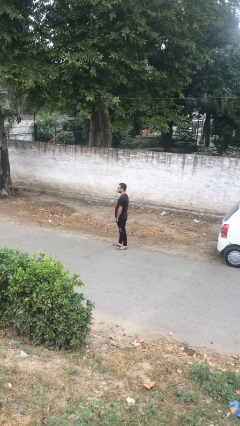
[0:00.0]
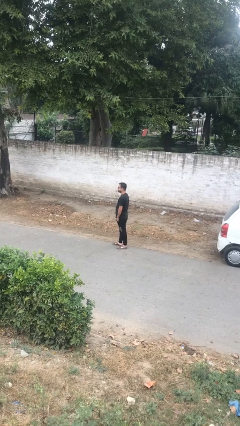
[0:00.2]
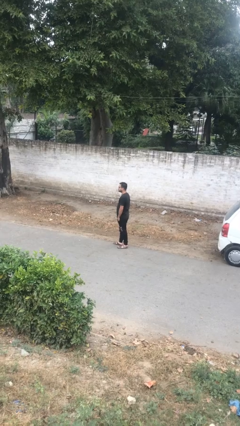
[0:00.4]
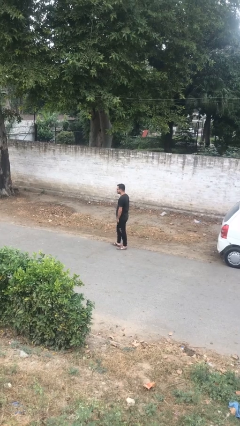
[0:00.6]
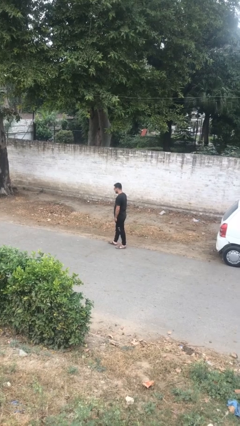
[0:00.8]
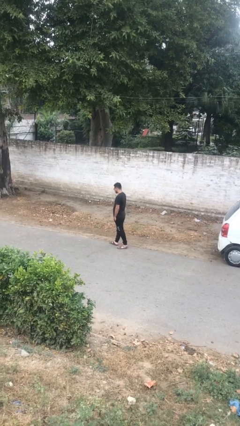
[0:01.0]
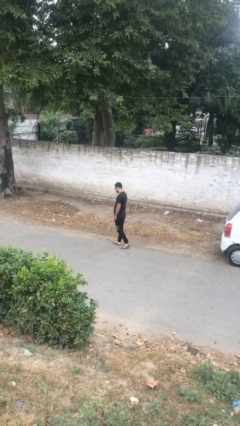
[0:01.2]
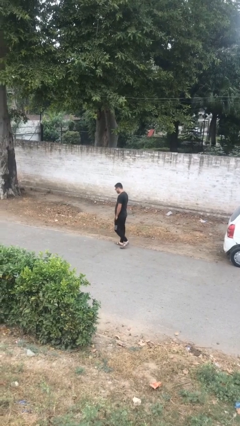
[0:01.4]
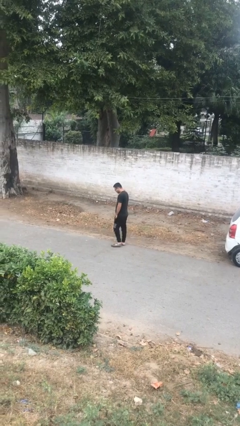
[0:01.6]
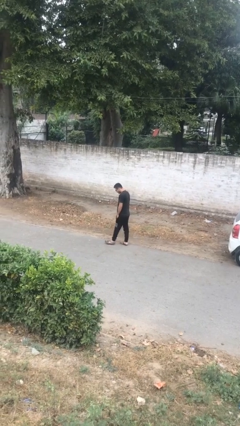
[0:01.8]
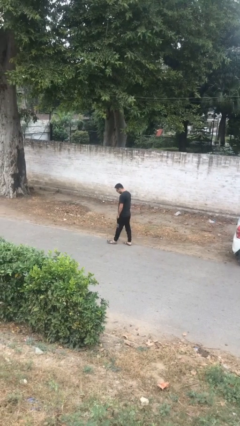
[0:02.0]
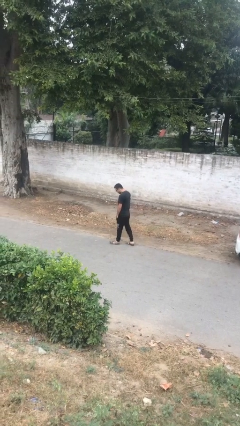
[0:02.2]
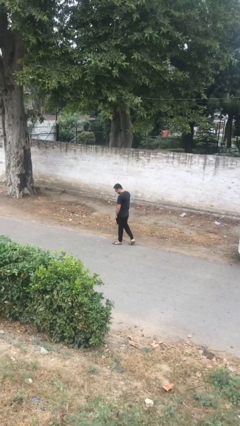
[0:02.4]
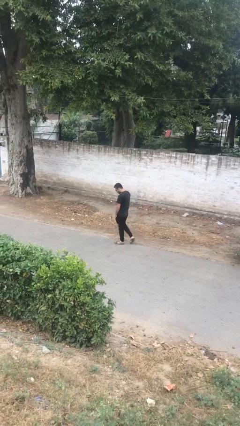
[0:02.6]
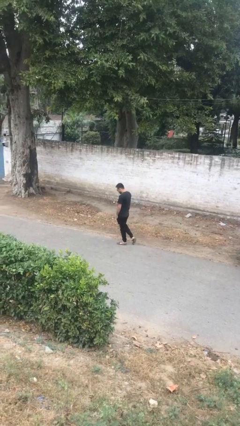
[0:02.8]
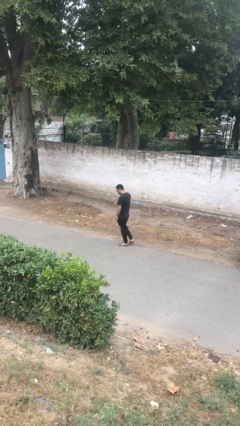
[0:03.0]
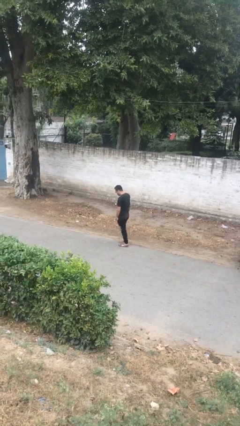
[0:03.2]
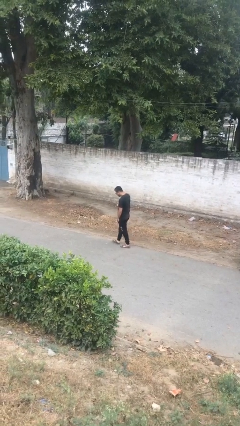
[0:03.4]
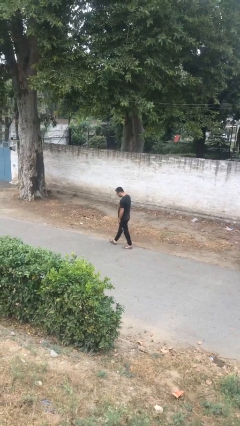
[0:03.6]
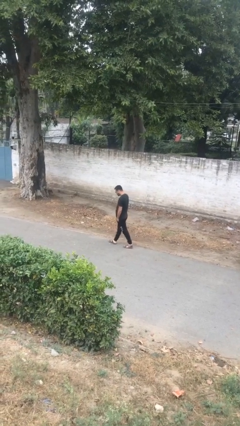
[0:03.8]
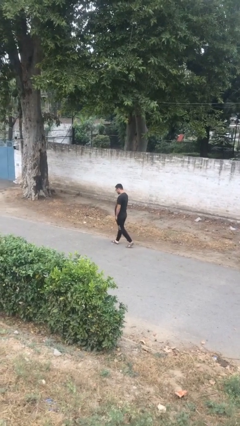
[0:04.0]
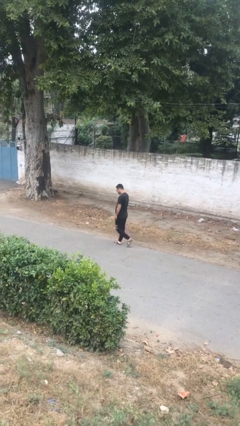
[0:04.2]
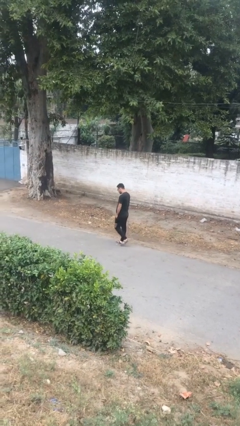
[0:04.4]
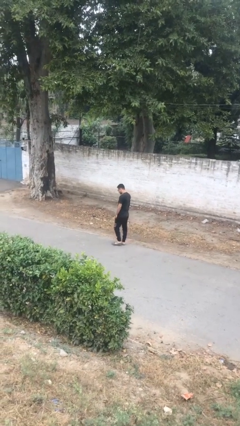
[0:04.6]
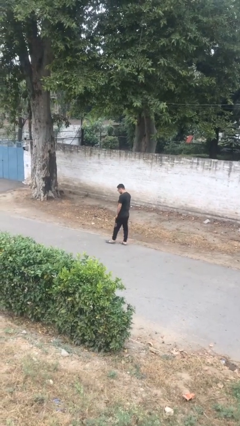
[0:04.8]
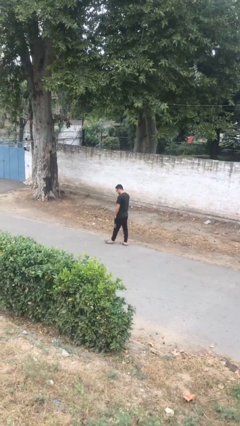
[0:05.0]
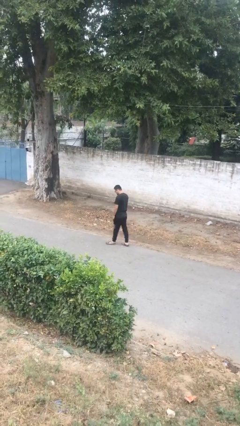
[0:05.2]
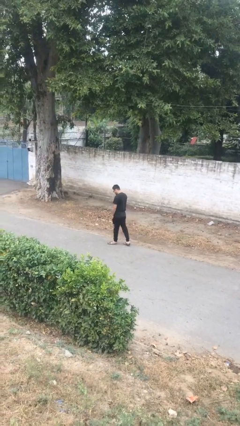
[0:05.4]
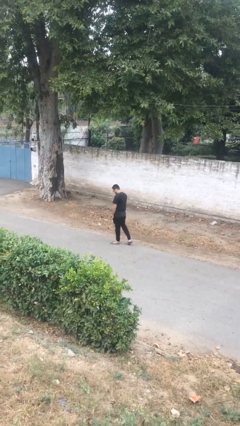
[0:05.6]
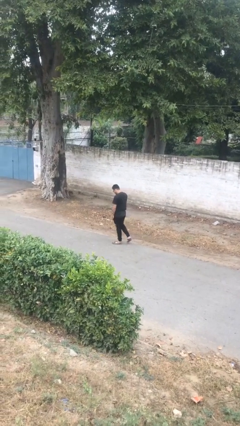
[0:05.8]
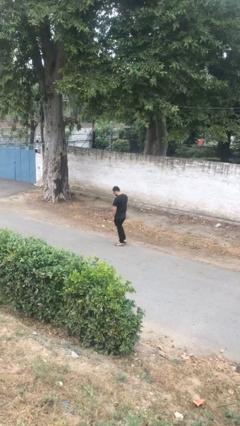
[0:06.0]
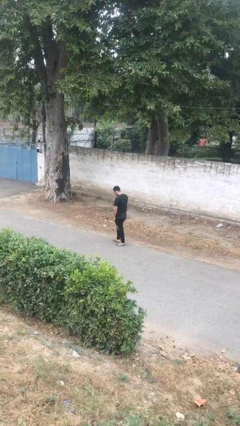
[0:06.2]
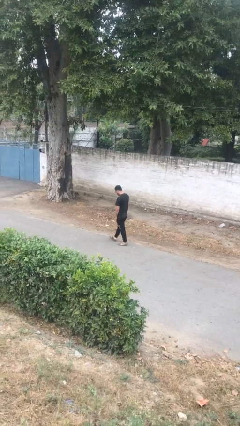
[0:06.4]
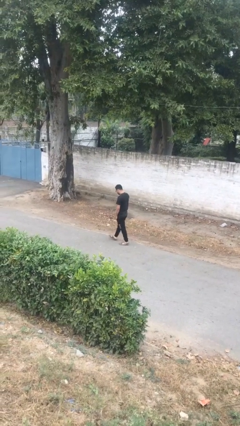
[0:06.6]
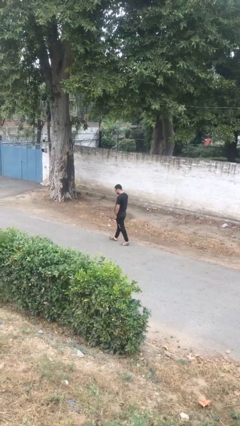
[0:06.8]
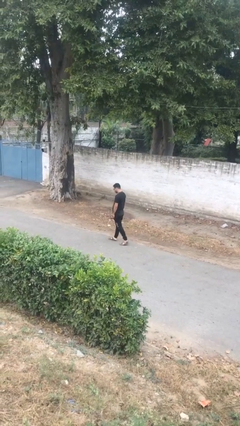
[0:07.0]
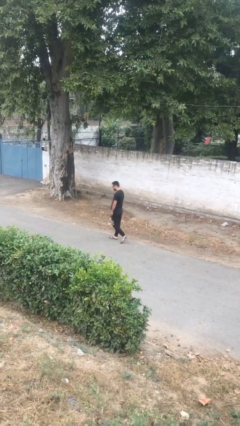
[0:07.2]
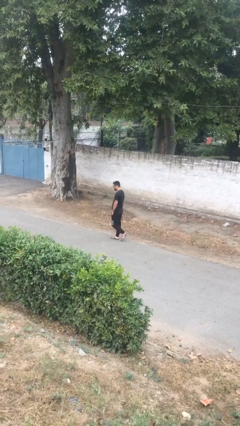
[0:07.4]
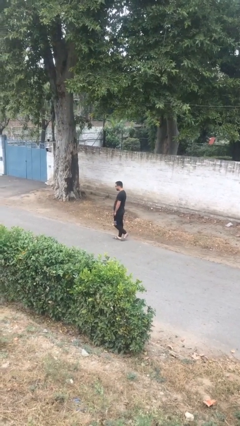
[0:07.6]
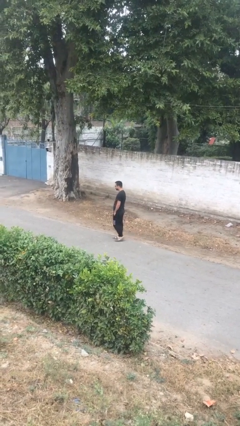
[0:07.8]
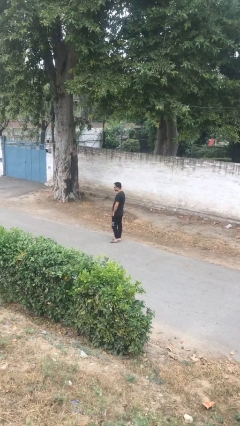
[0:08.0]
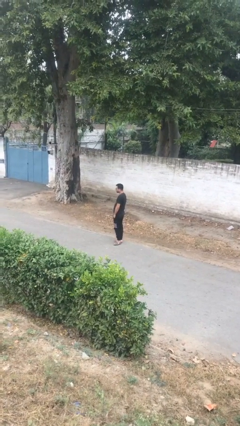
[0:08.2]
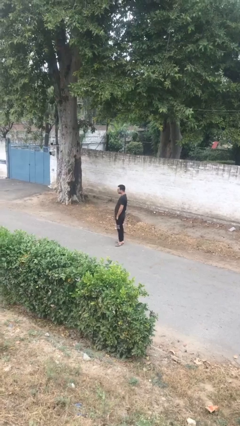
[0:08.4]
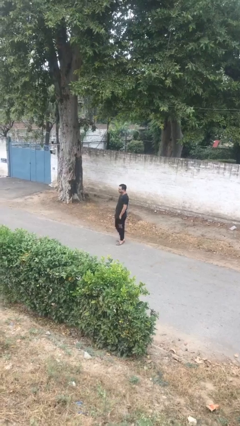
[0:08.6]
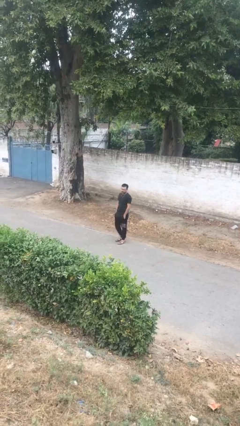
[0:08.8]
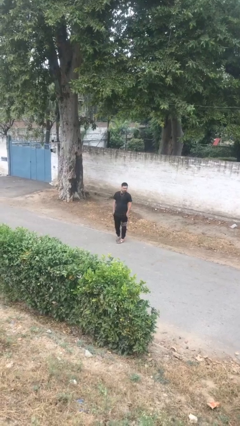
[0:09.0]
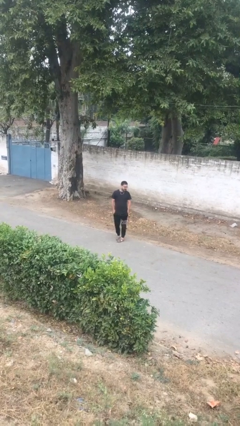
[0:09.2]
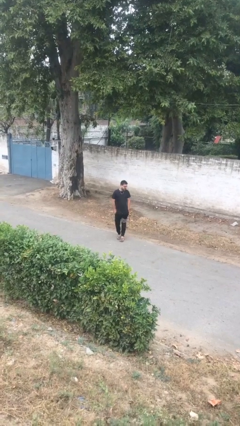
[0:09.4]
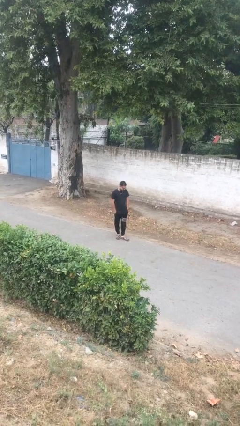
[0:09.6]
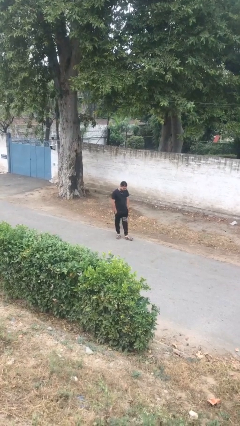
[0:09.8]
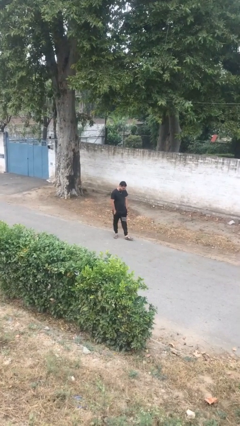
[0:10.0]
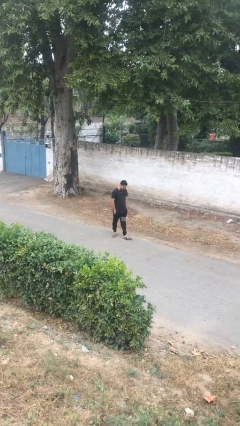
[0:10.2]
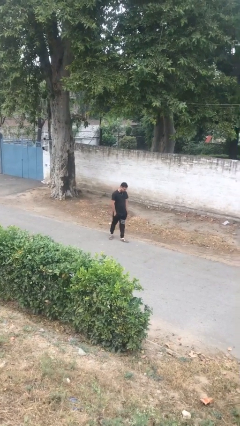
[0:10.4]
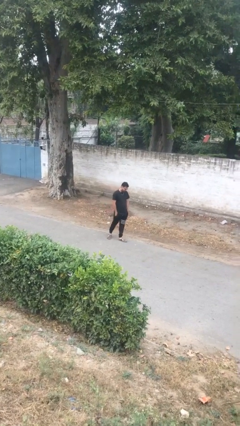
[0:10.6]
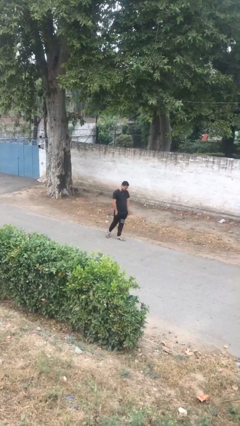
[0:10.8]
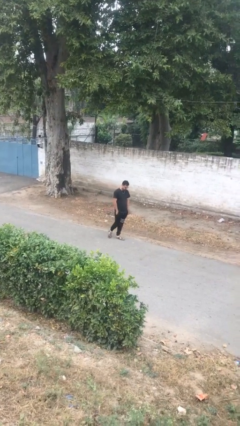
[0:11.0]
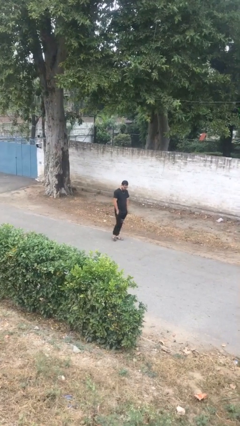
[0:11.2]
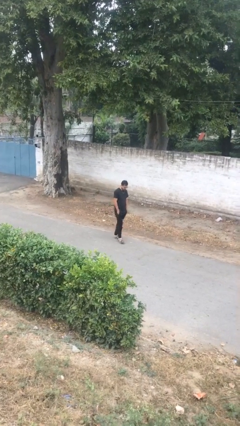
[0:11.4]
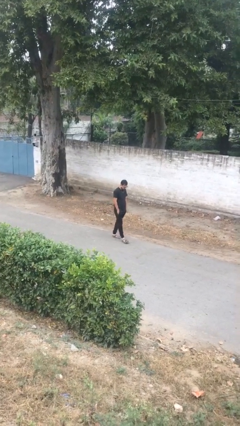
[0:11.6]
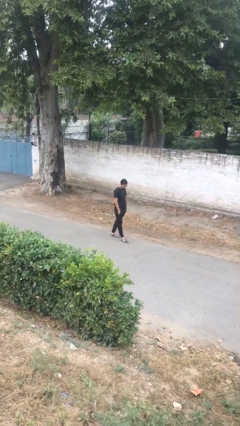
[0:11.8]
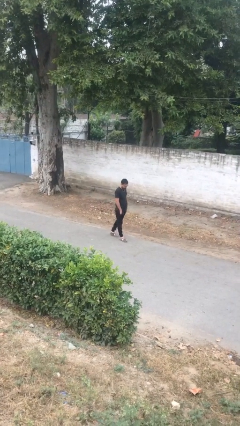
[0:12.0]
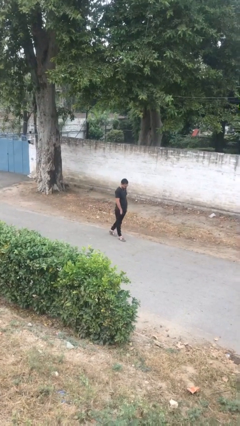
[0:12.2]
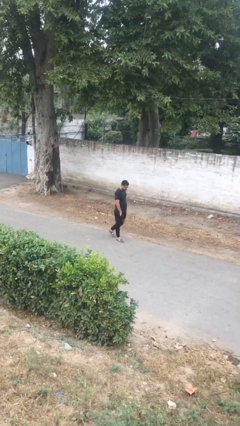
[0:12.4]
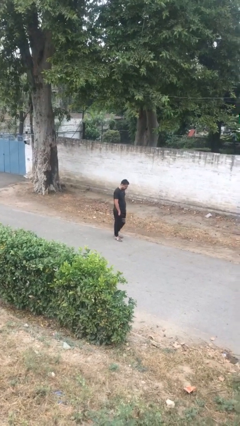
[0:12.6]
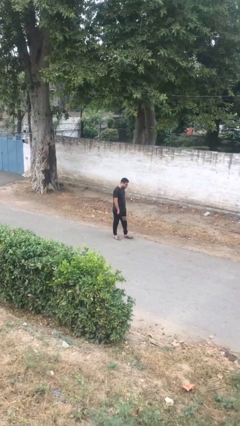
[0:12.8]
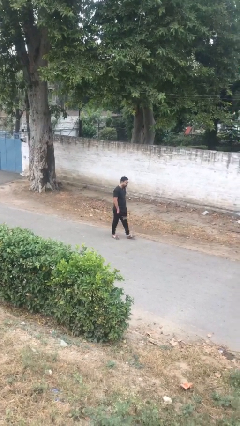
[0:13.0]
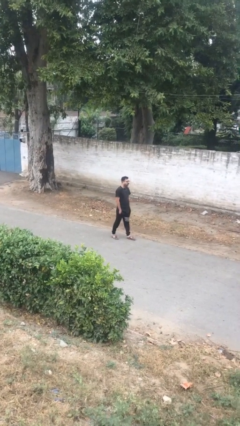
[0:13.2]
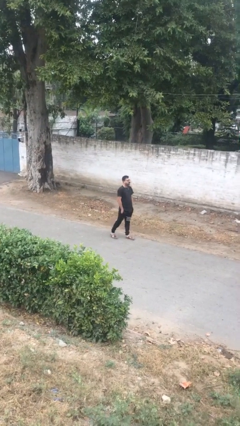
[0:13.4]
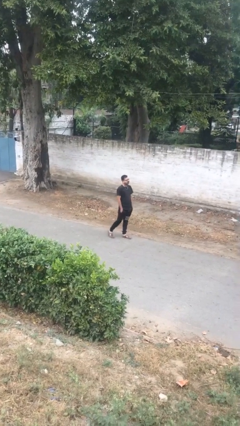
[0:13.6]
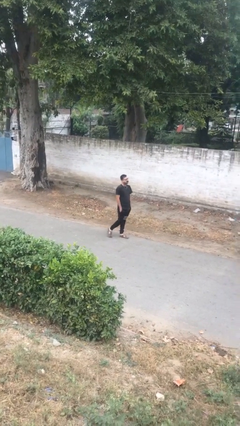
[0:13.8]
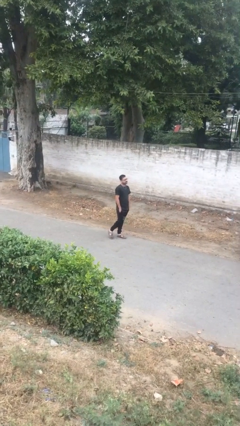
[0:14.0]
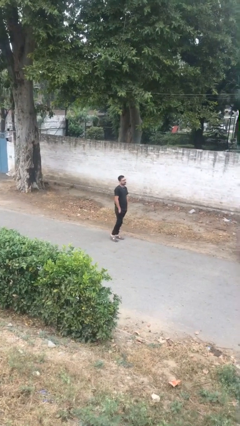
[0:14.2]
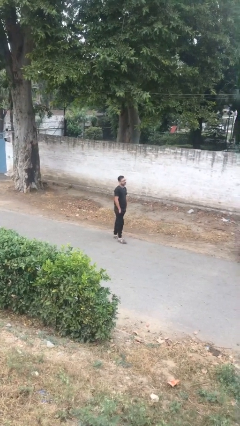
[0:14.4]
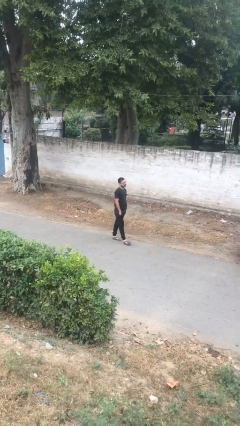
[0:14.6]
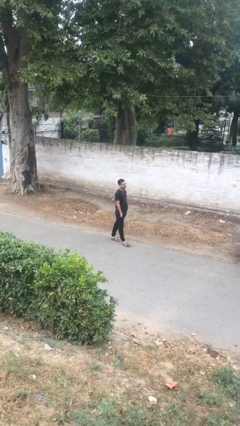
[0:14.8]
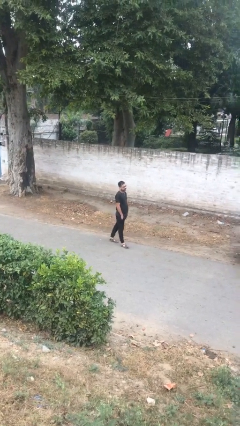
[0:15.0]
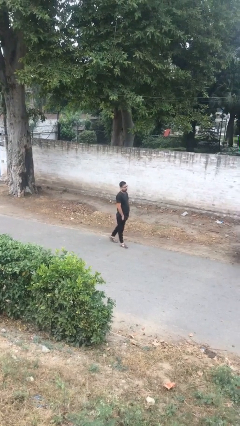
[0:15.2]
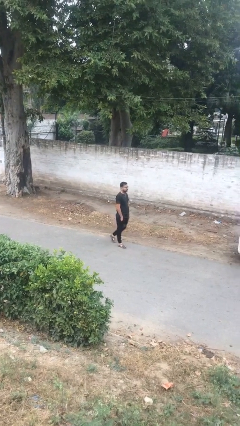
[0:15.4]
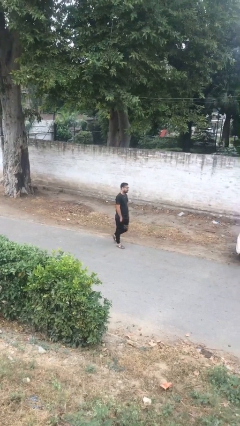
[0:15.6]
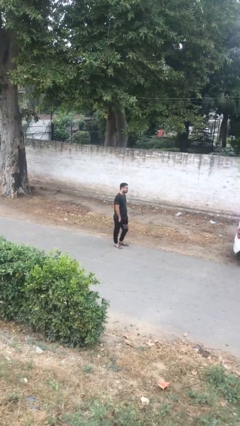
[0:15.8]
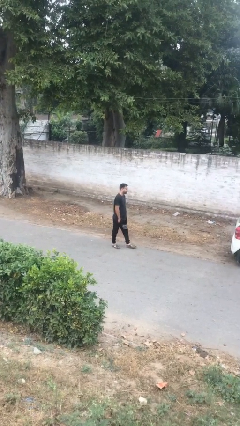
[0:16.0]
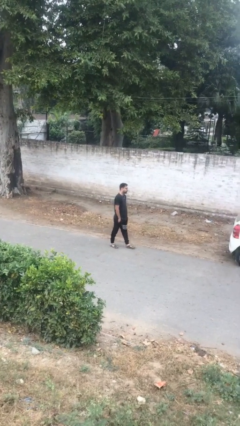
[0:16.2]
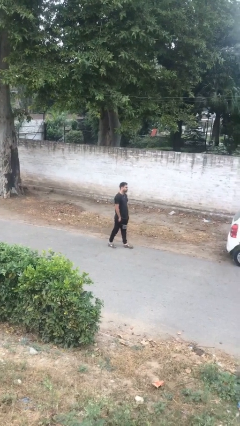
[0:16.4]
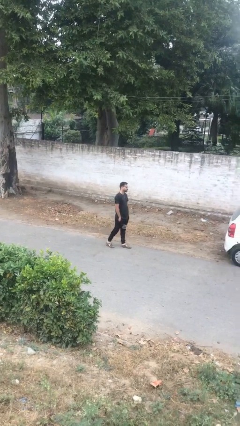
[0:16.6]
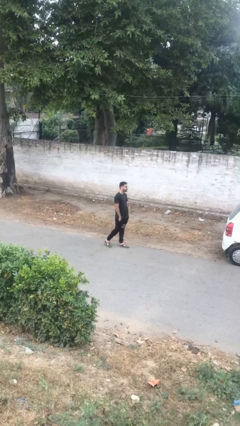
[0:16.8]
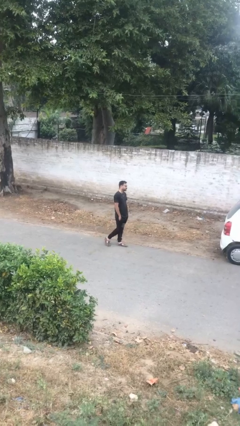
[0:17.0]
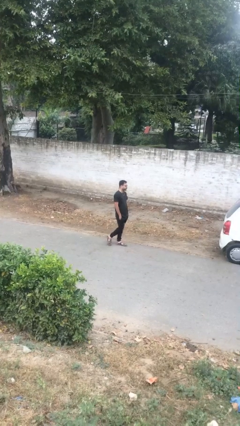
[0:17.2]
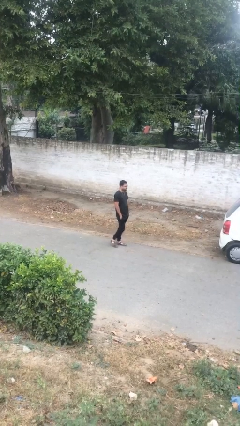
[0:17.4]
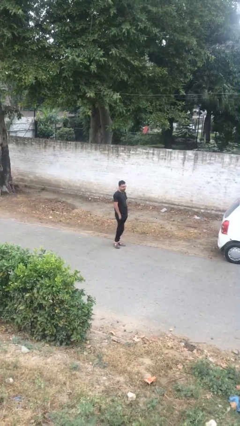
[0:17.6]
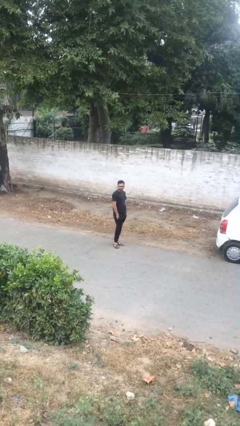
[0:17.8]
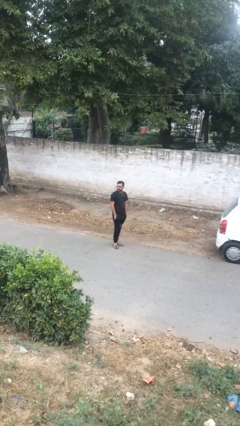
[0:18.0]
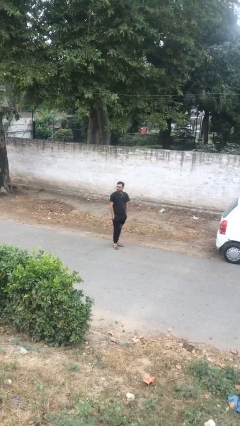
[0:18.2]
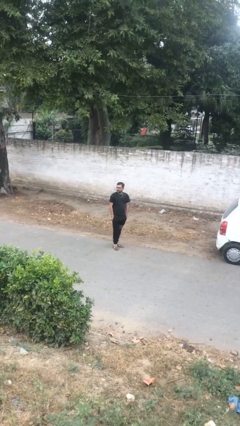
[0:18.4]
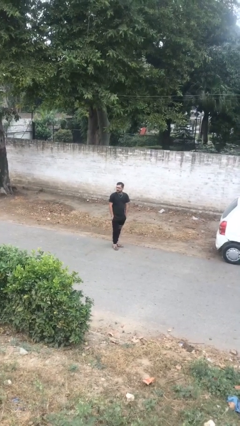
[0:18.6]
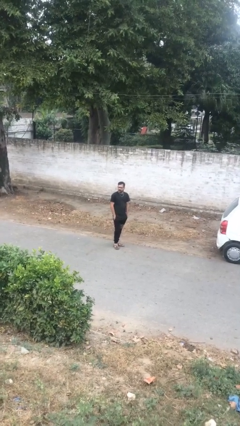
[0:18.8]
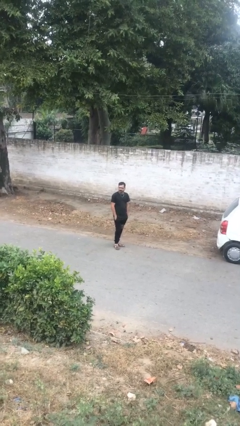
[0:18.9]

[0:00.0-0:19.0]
person walks
